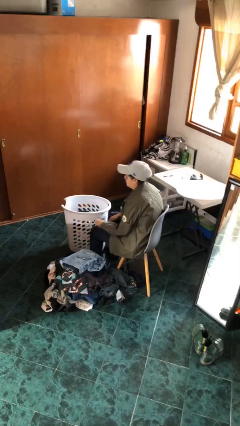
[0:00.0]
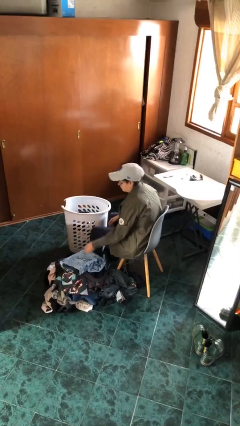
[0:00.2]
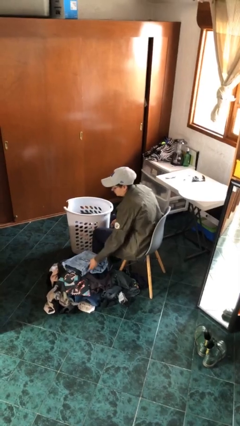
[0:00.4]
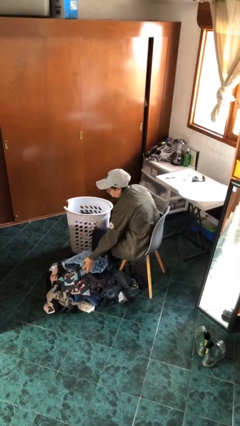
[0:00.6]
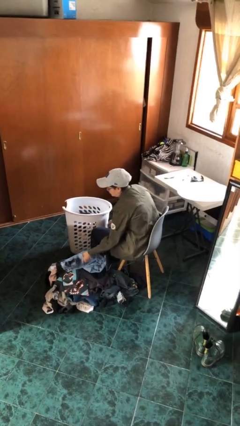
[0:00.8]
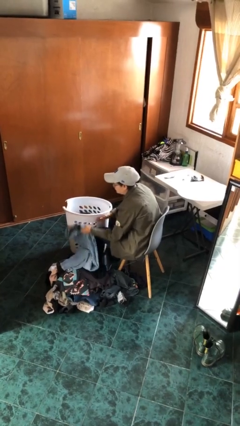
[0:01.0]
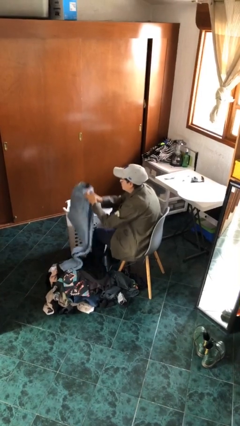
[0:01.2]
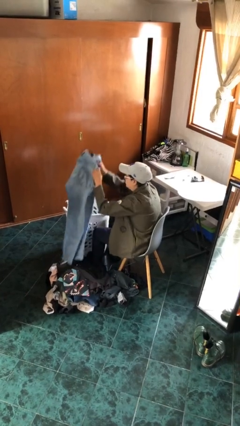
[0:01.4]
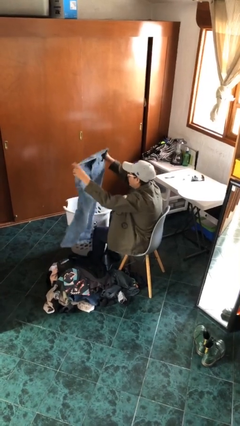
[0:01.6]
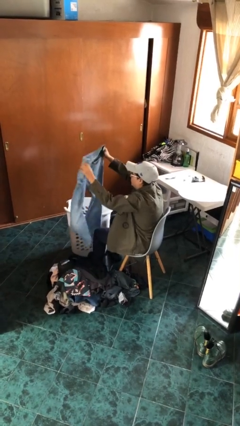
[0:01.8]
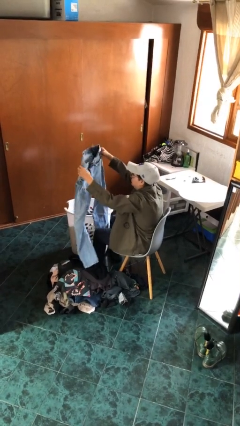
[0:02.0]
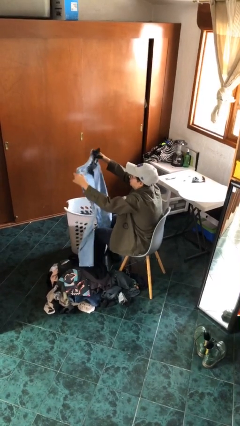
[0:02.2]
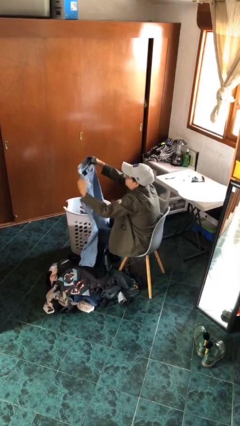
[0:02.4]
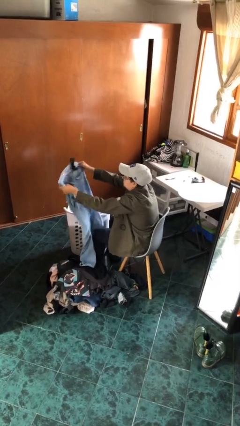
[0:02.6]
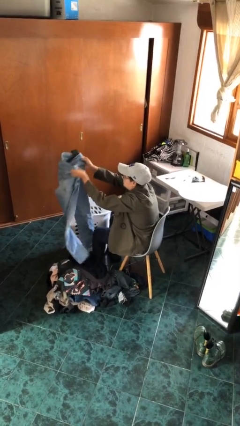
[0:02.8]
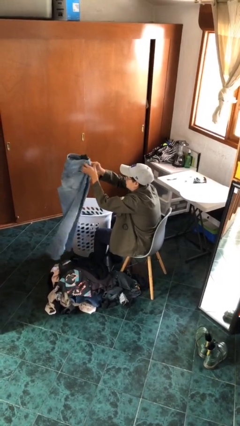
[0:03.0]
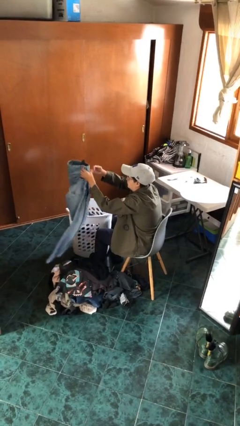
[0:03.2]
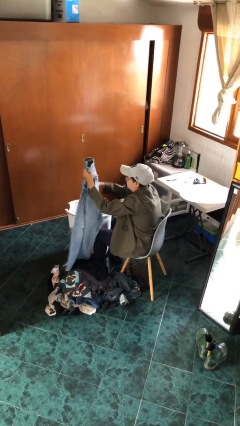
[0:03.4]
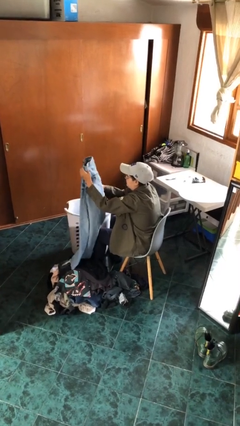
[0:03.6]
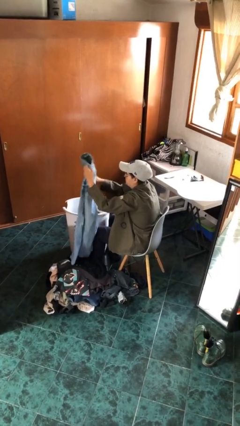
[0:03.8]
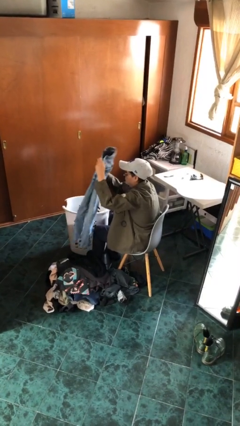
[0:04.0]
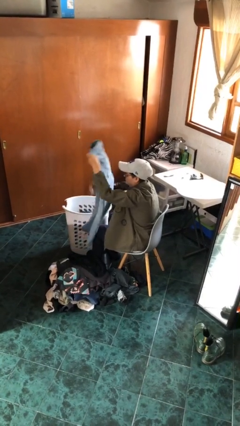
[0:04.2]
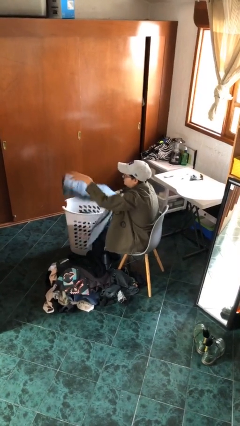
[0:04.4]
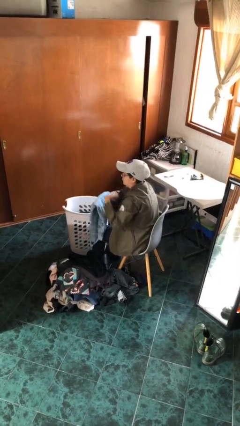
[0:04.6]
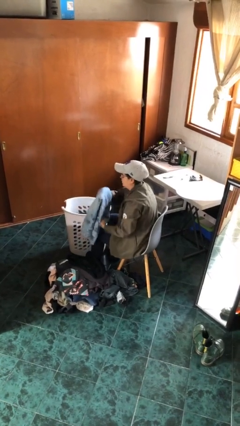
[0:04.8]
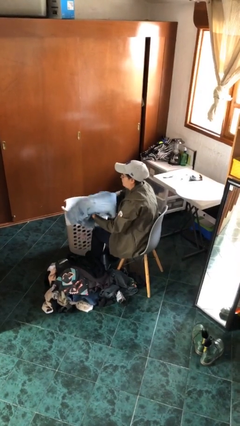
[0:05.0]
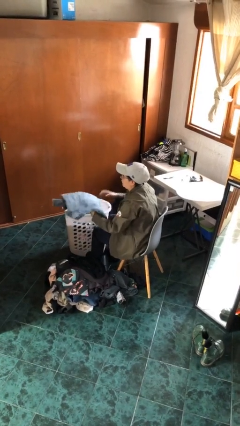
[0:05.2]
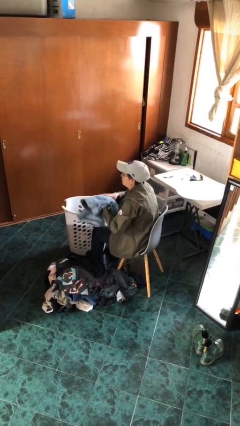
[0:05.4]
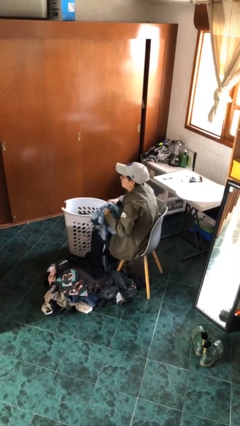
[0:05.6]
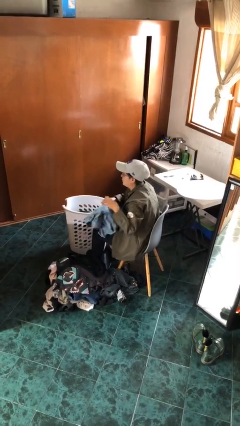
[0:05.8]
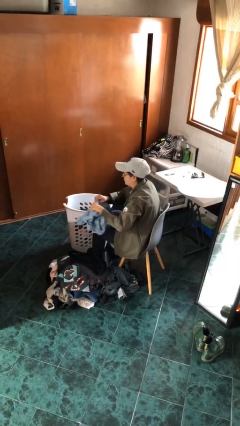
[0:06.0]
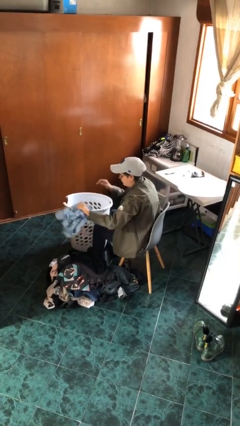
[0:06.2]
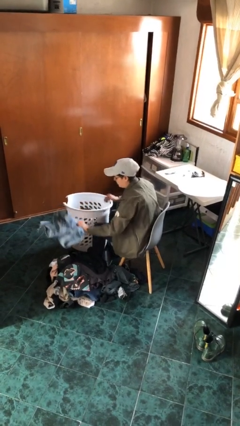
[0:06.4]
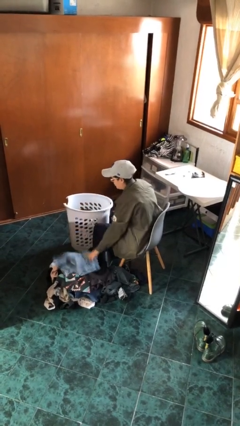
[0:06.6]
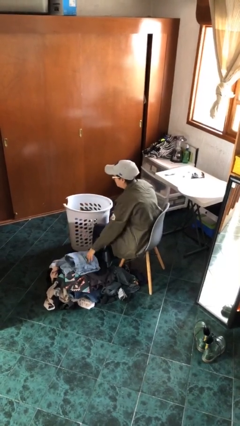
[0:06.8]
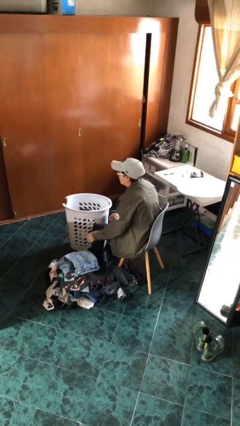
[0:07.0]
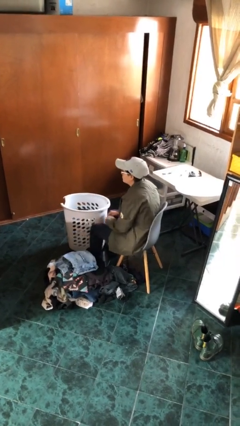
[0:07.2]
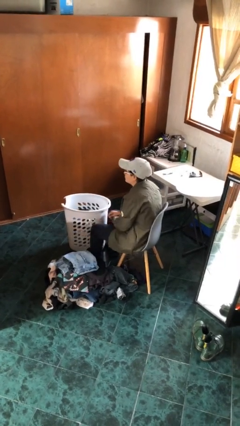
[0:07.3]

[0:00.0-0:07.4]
person folds pants

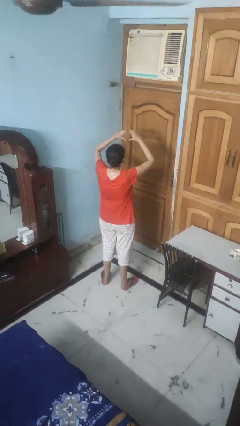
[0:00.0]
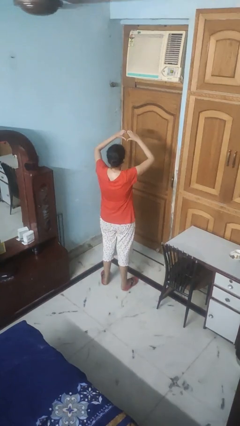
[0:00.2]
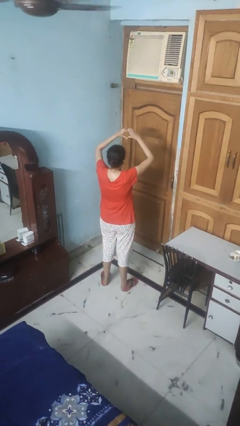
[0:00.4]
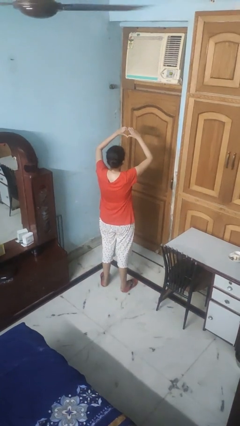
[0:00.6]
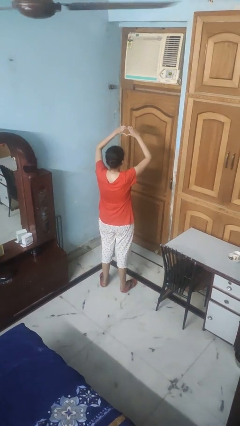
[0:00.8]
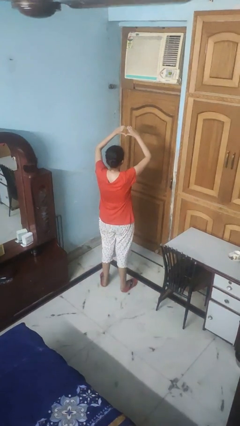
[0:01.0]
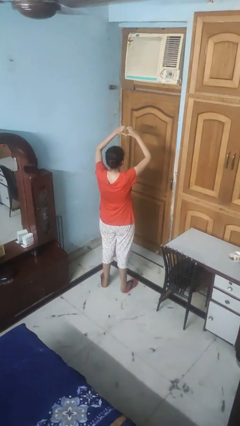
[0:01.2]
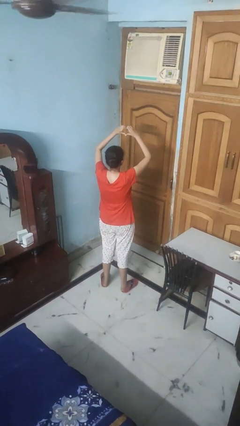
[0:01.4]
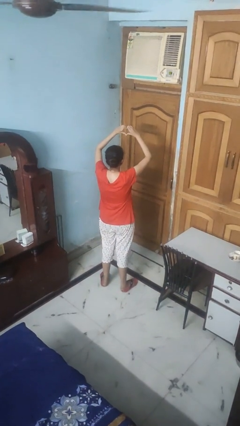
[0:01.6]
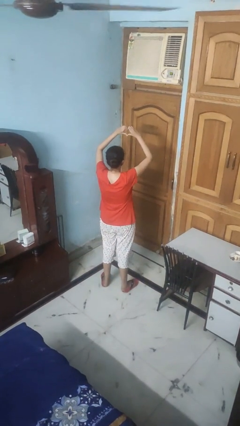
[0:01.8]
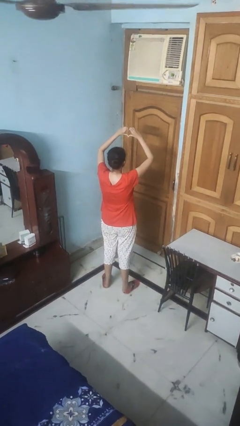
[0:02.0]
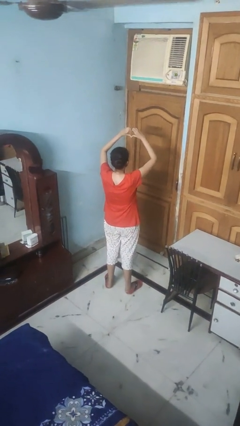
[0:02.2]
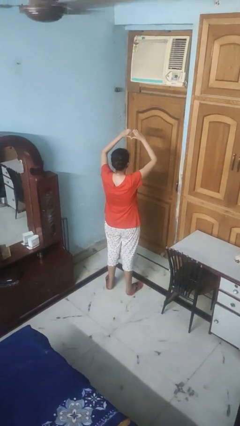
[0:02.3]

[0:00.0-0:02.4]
person gestures heart

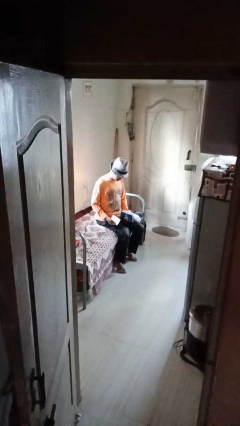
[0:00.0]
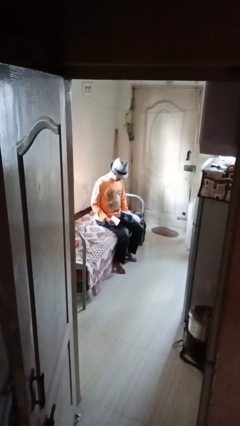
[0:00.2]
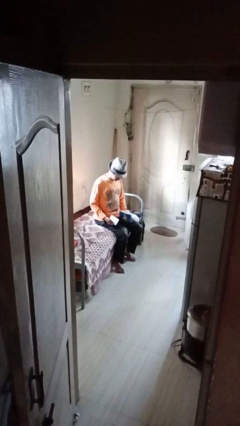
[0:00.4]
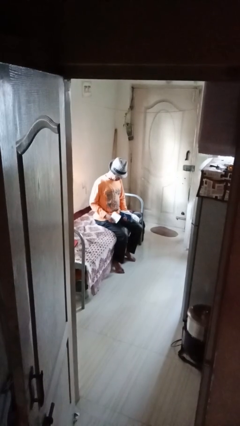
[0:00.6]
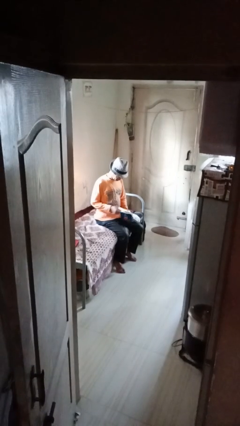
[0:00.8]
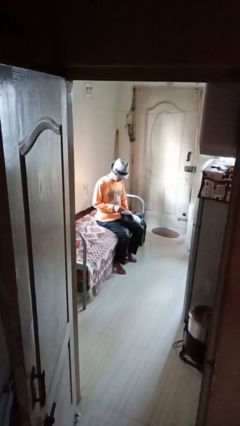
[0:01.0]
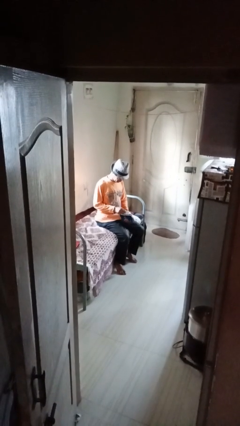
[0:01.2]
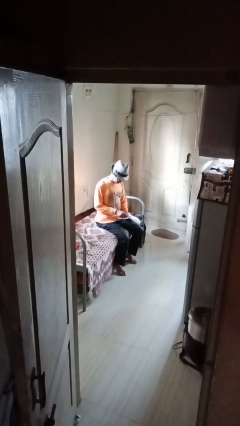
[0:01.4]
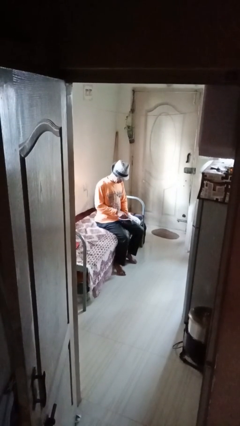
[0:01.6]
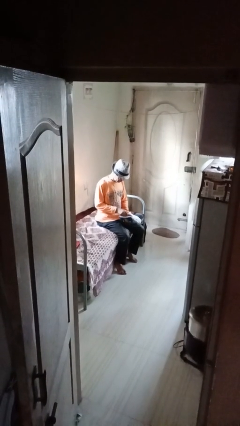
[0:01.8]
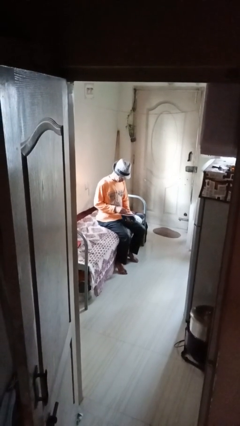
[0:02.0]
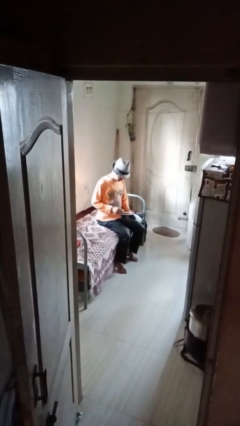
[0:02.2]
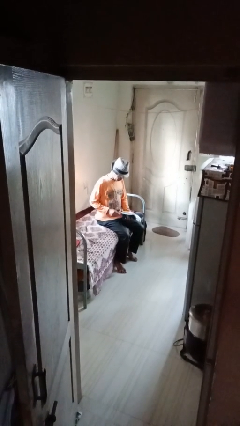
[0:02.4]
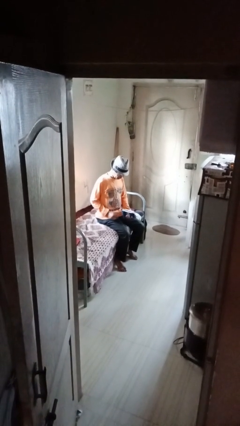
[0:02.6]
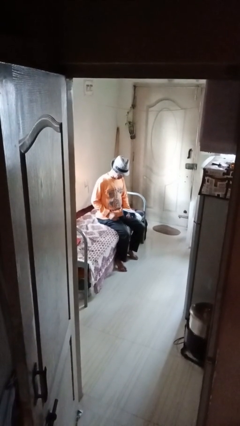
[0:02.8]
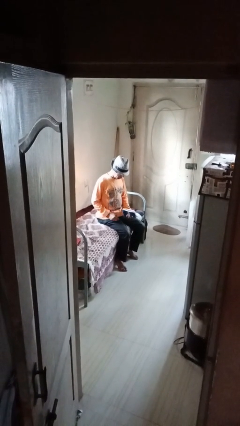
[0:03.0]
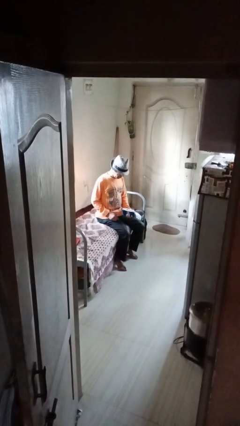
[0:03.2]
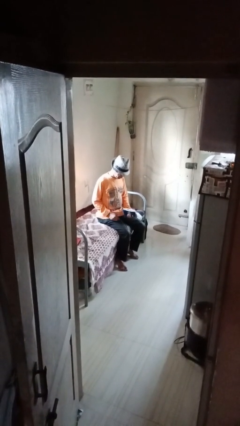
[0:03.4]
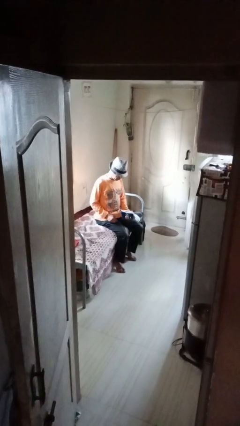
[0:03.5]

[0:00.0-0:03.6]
person puts object into purse

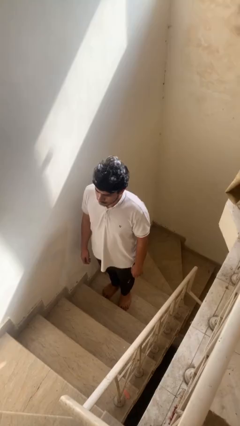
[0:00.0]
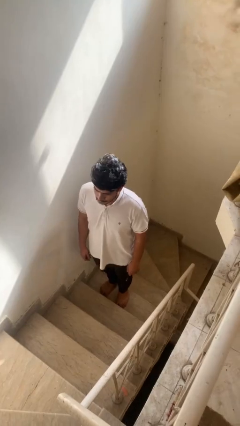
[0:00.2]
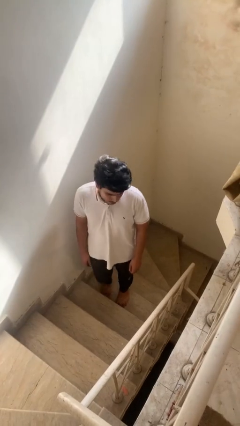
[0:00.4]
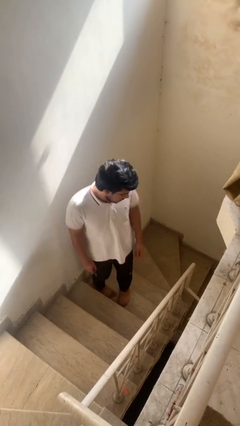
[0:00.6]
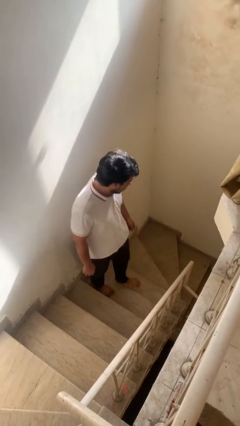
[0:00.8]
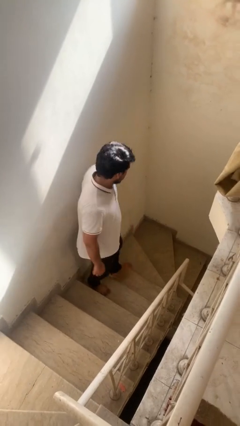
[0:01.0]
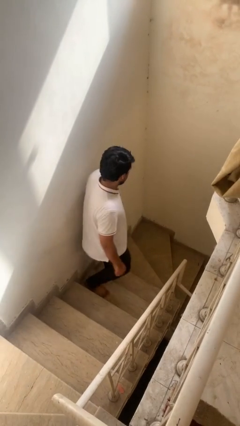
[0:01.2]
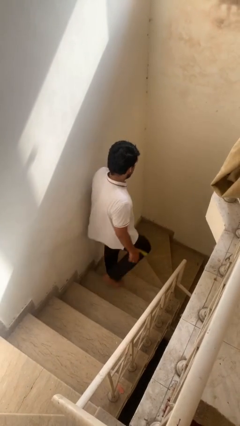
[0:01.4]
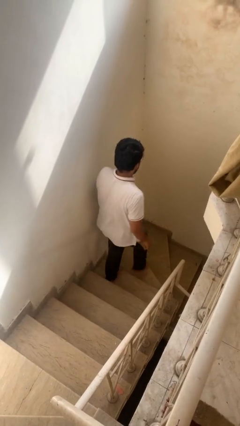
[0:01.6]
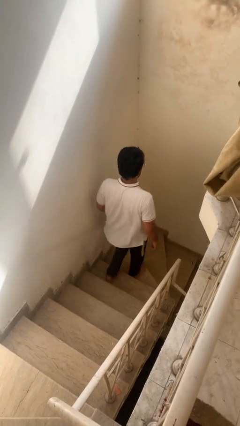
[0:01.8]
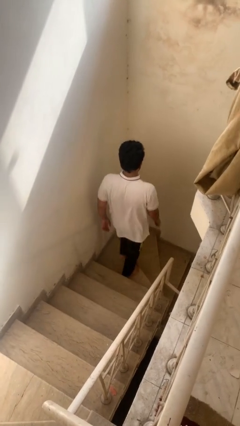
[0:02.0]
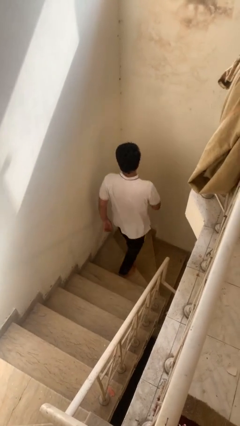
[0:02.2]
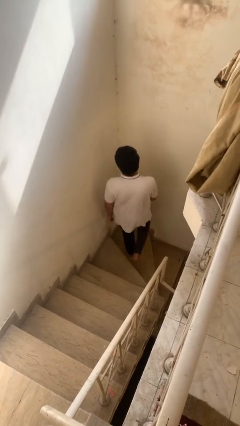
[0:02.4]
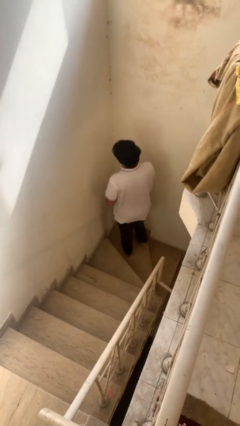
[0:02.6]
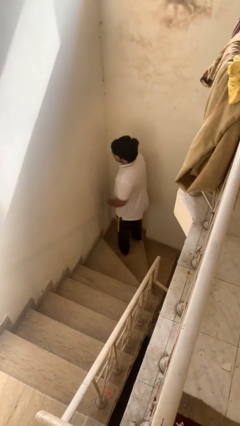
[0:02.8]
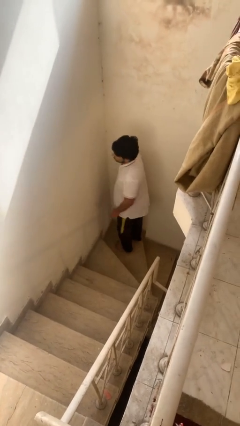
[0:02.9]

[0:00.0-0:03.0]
person climbs down stairs

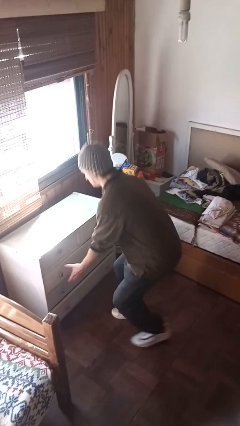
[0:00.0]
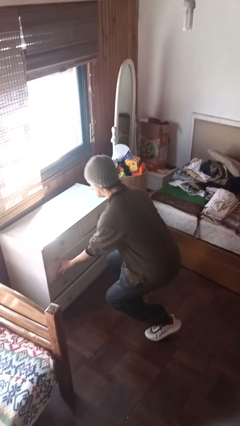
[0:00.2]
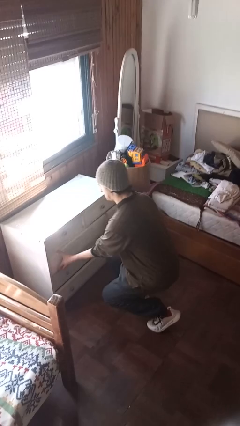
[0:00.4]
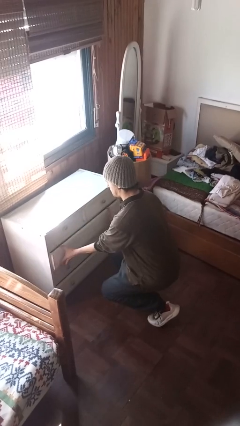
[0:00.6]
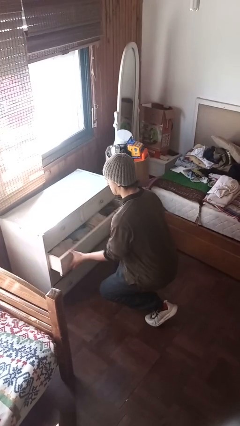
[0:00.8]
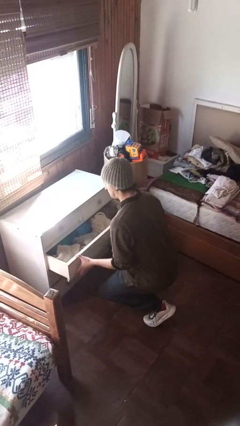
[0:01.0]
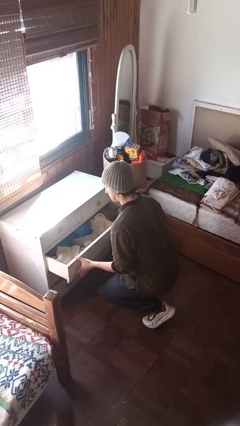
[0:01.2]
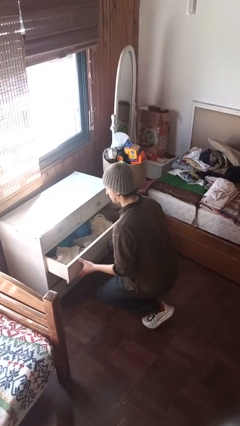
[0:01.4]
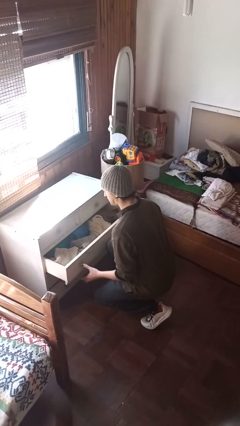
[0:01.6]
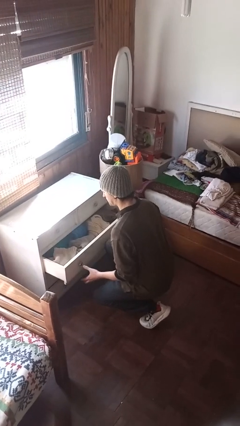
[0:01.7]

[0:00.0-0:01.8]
person opens dresser drawer
